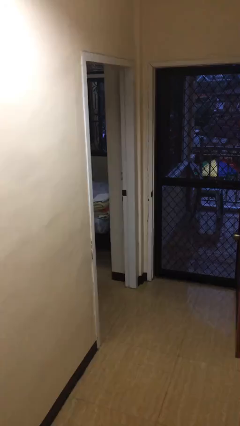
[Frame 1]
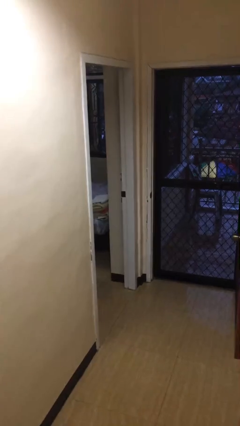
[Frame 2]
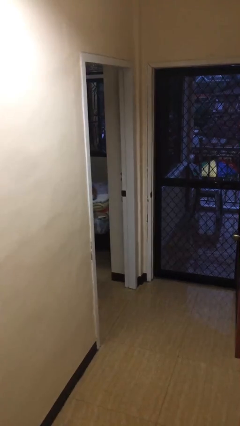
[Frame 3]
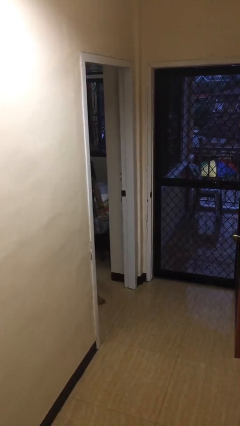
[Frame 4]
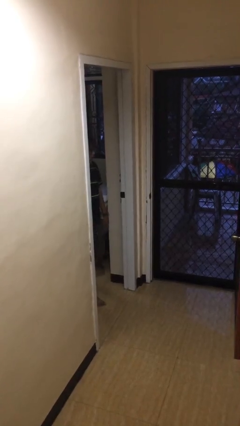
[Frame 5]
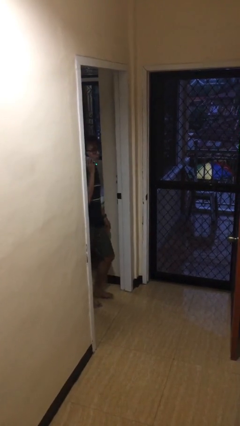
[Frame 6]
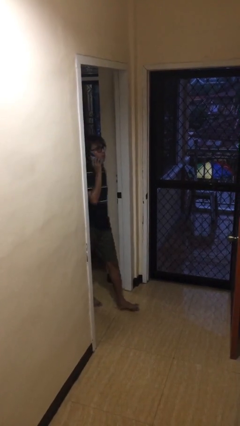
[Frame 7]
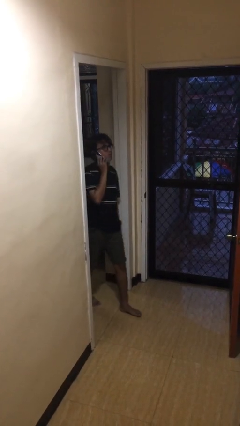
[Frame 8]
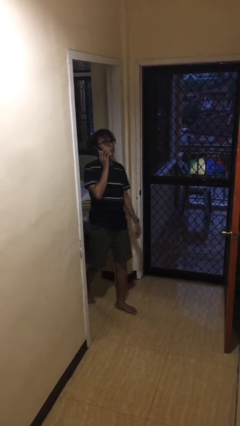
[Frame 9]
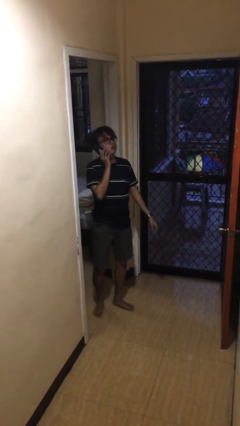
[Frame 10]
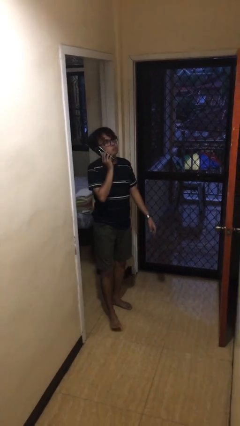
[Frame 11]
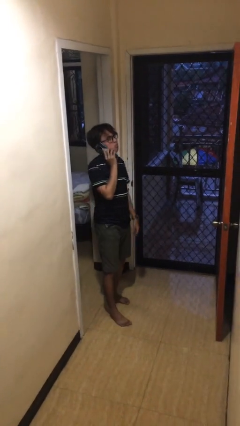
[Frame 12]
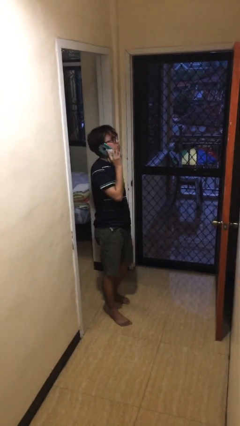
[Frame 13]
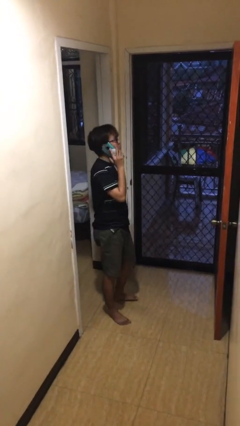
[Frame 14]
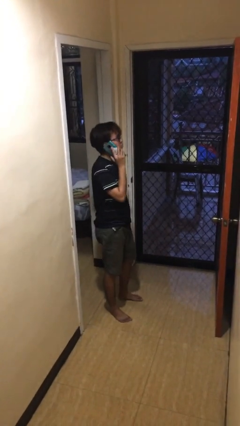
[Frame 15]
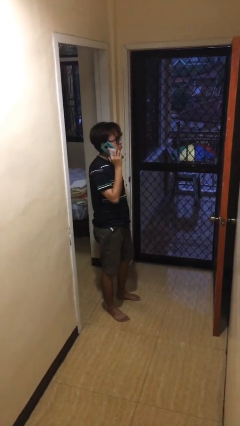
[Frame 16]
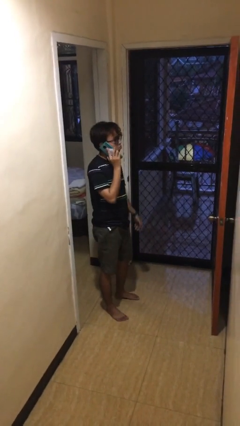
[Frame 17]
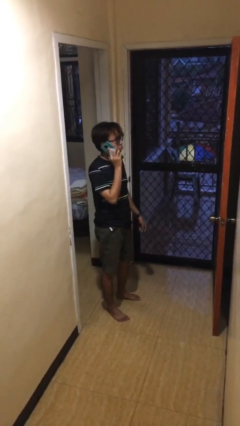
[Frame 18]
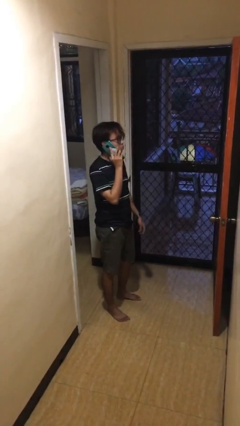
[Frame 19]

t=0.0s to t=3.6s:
person enters scene through structure

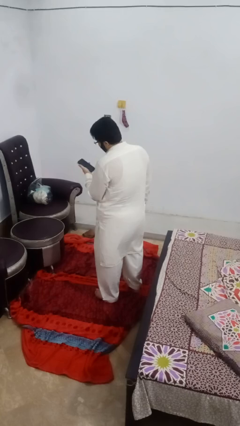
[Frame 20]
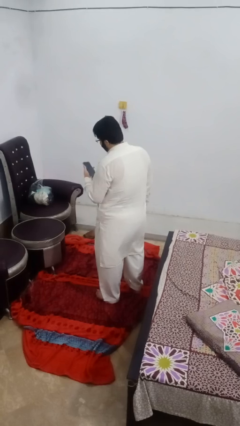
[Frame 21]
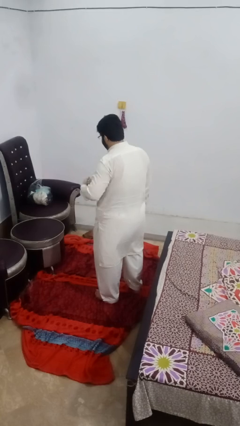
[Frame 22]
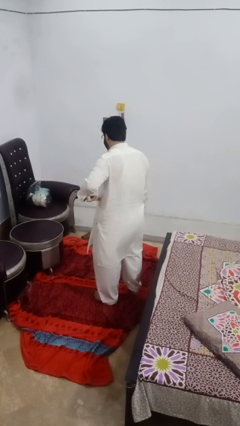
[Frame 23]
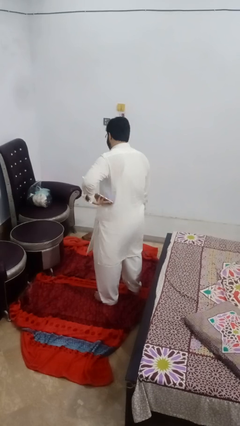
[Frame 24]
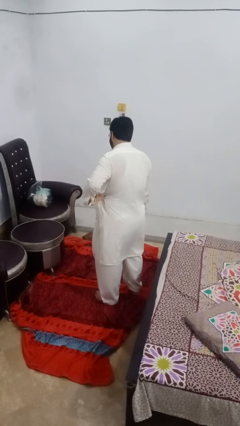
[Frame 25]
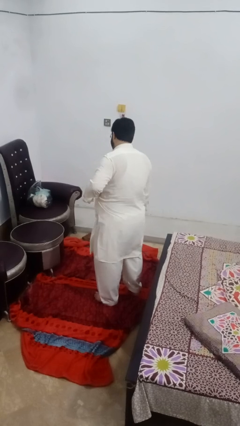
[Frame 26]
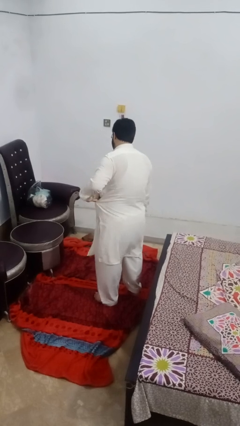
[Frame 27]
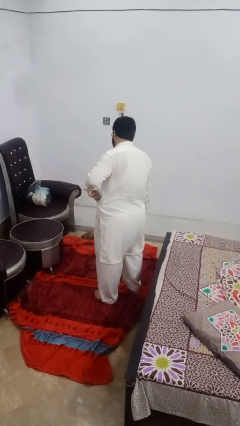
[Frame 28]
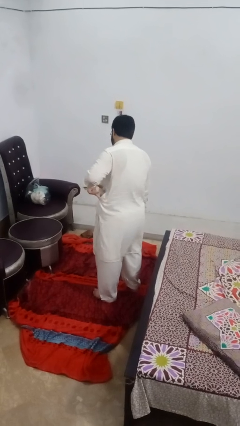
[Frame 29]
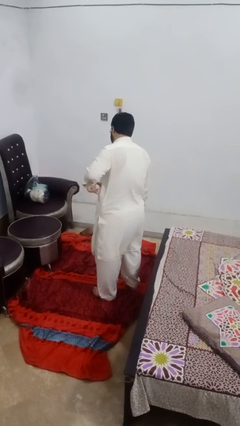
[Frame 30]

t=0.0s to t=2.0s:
person puts phone into pocket

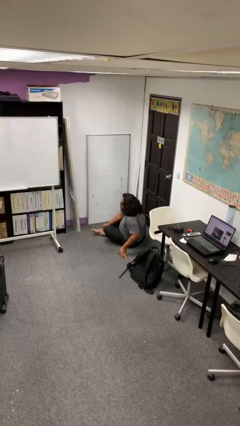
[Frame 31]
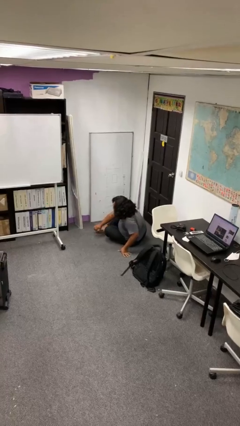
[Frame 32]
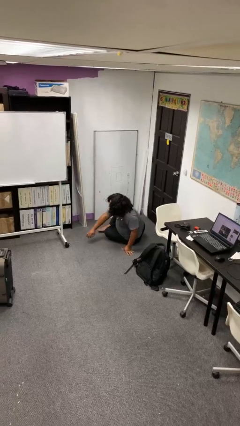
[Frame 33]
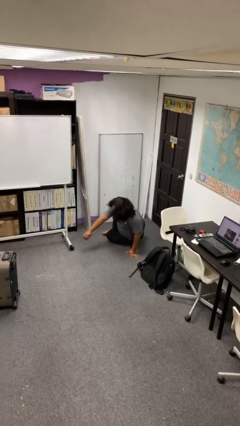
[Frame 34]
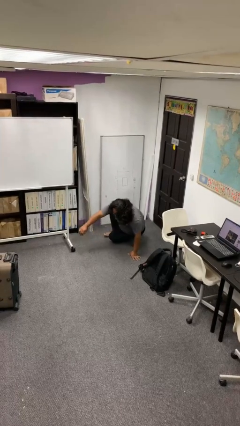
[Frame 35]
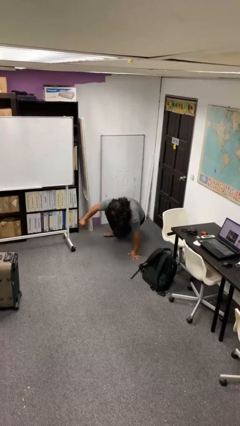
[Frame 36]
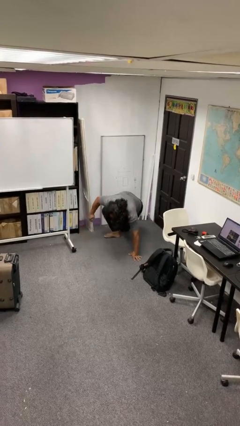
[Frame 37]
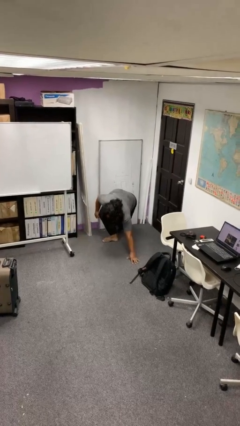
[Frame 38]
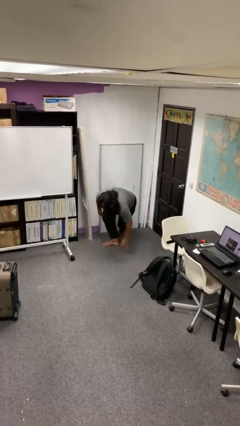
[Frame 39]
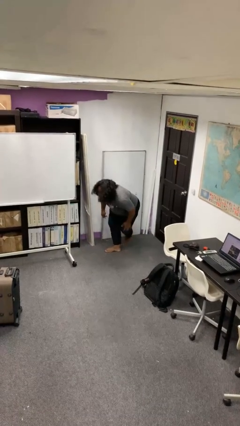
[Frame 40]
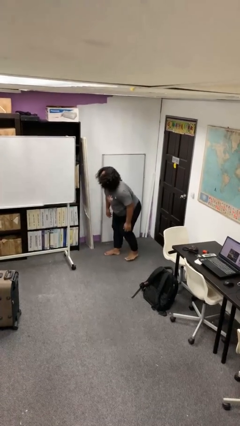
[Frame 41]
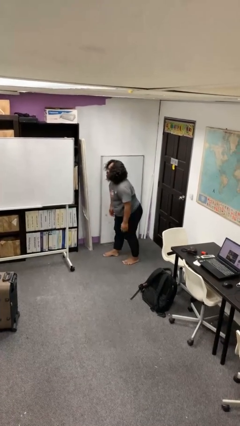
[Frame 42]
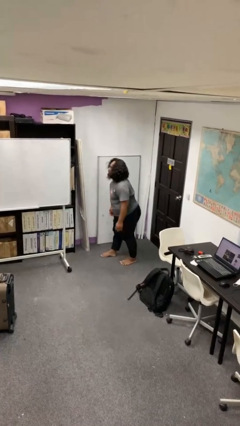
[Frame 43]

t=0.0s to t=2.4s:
person stands up from floor

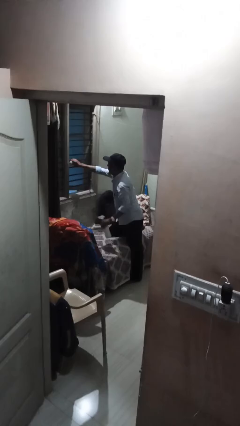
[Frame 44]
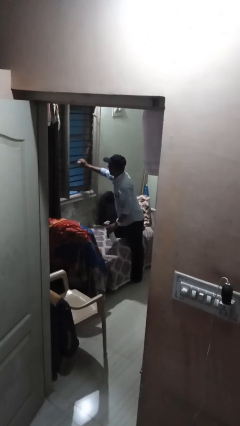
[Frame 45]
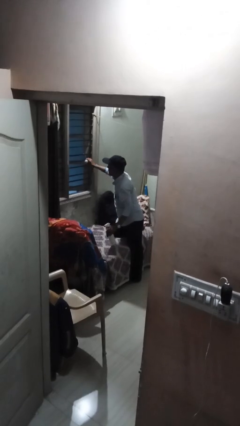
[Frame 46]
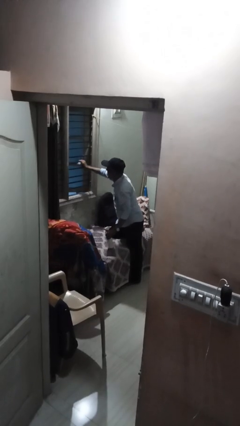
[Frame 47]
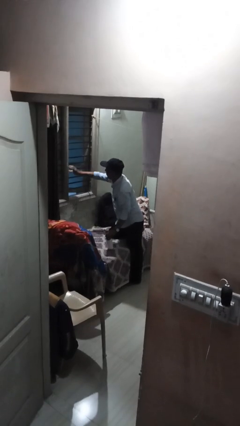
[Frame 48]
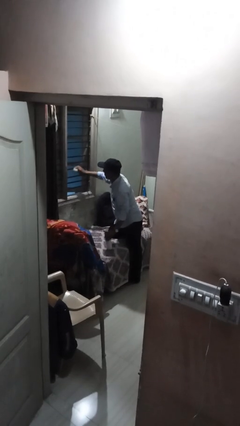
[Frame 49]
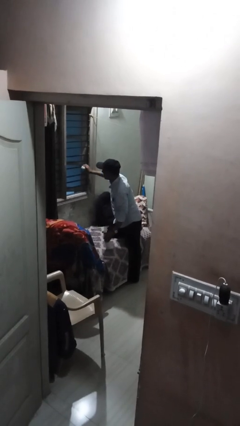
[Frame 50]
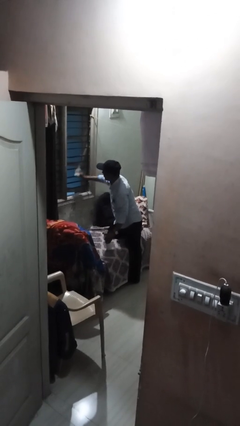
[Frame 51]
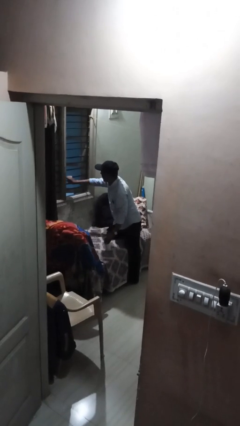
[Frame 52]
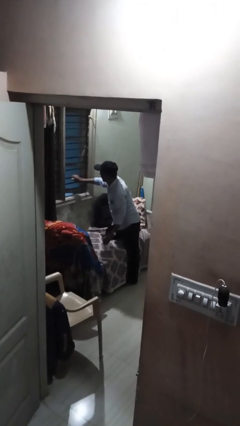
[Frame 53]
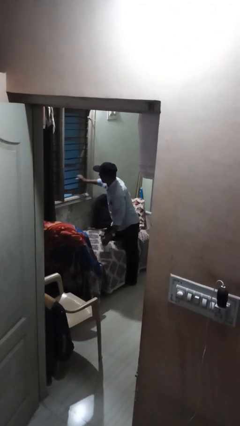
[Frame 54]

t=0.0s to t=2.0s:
person washes window

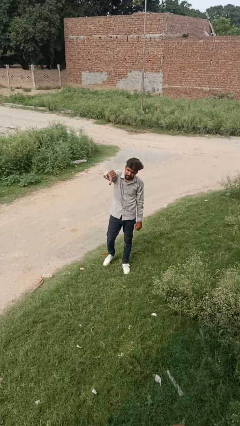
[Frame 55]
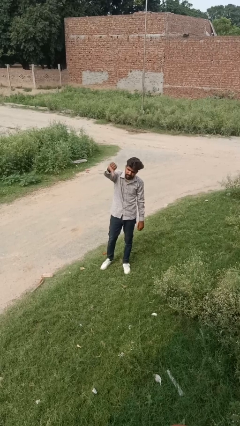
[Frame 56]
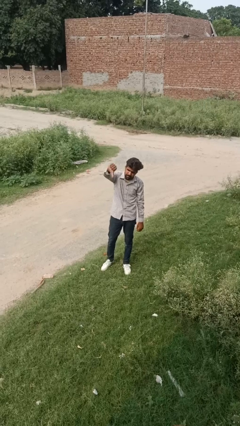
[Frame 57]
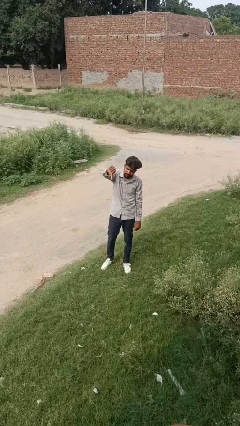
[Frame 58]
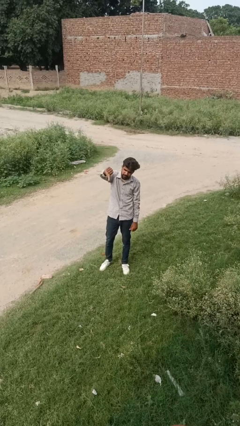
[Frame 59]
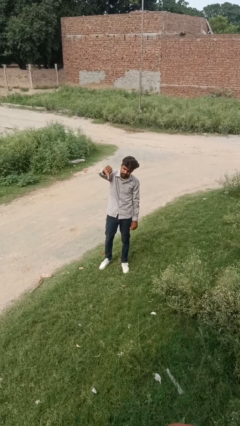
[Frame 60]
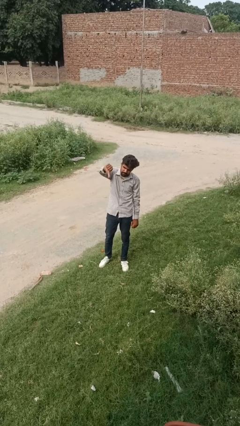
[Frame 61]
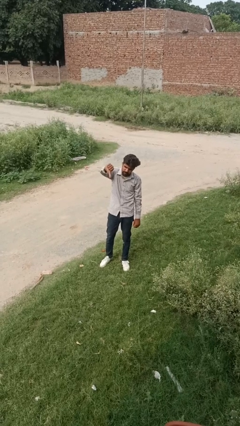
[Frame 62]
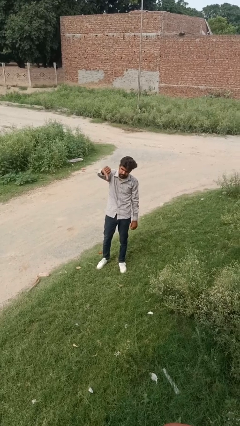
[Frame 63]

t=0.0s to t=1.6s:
person gestures thumbs down

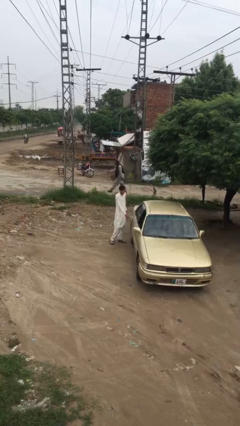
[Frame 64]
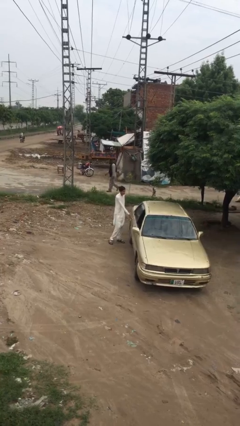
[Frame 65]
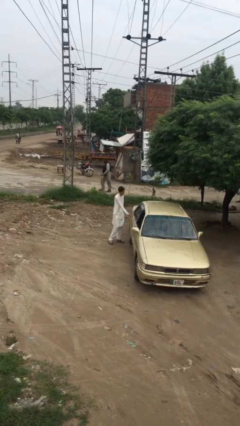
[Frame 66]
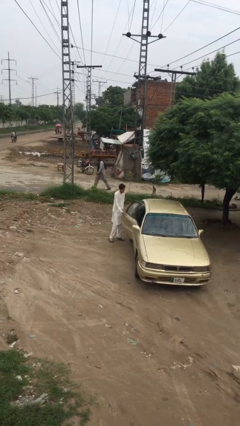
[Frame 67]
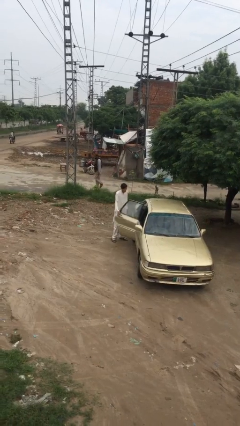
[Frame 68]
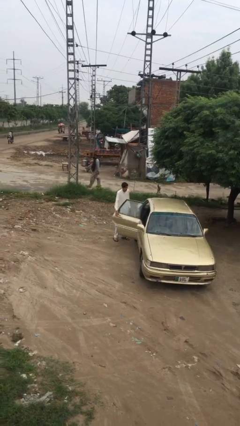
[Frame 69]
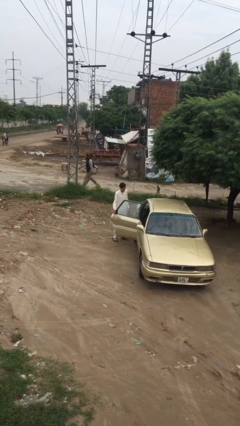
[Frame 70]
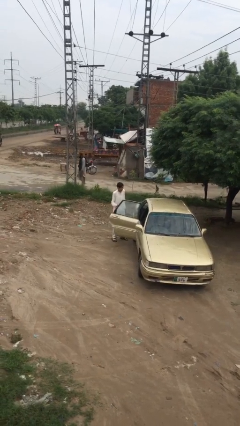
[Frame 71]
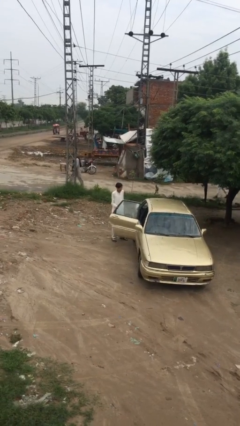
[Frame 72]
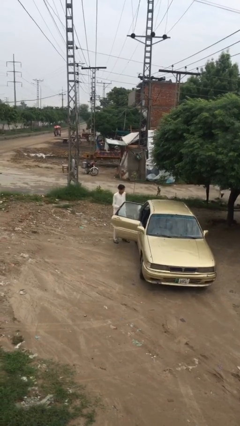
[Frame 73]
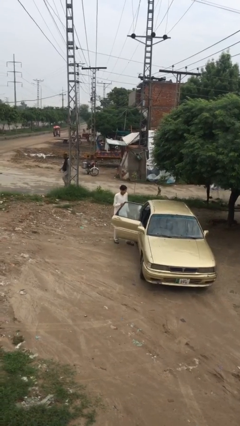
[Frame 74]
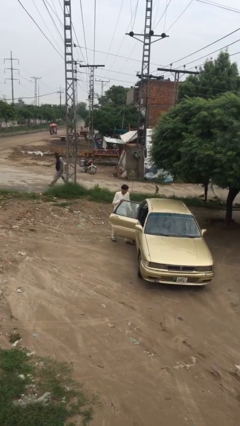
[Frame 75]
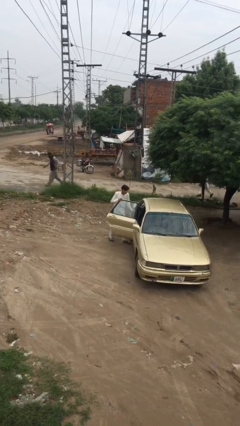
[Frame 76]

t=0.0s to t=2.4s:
person opens car door

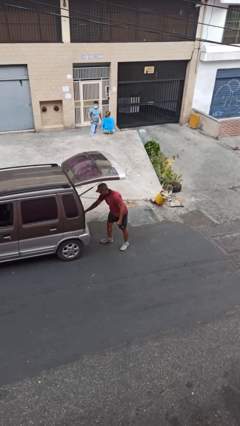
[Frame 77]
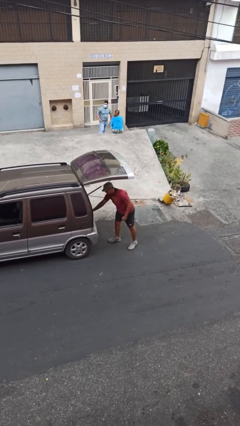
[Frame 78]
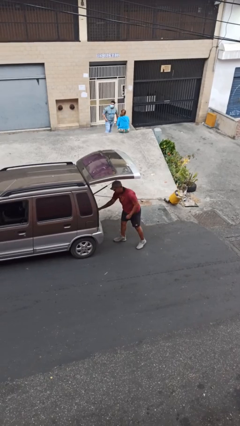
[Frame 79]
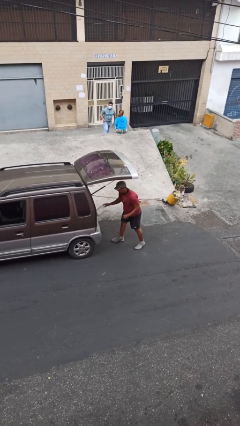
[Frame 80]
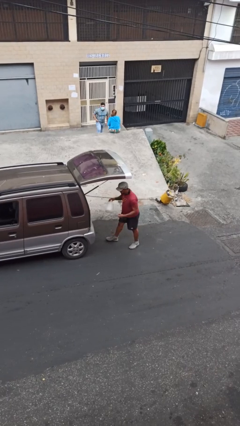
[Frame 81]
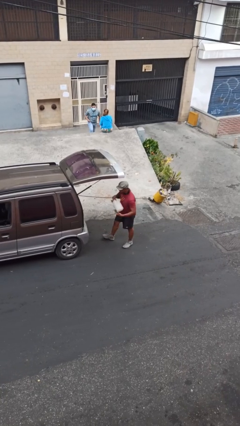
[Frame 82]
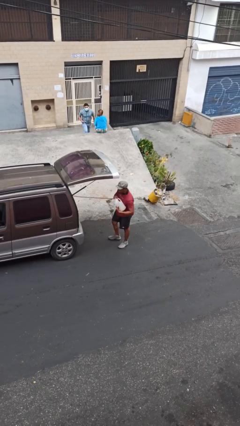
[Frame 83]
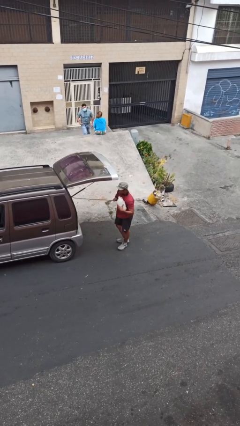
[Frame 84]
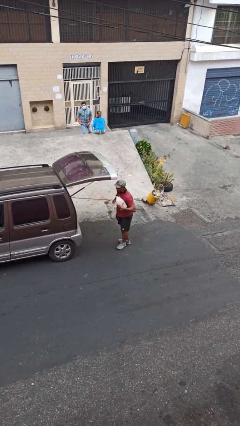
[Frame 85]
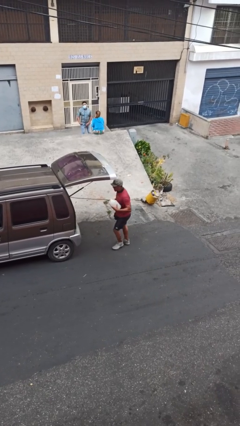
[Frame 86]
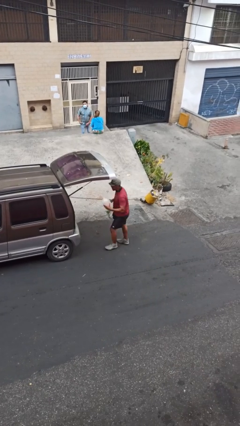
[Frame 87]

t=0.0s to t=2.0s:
person unloads car

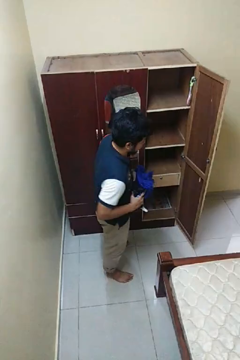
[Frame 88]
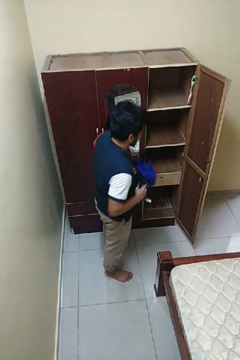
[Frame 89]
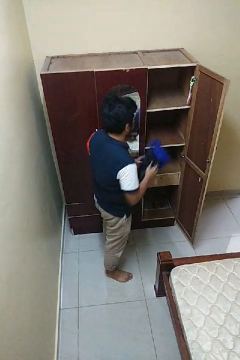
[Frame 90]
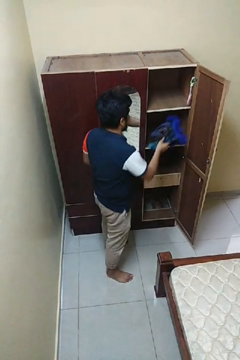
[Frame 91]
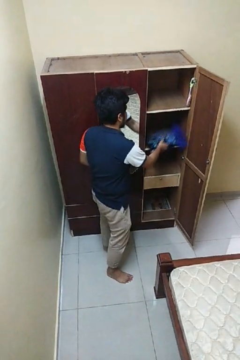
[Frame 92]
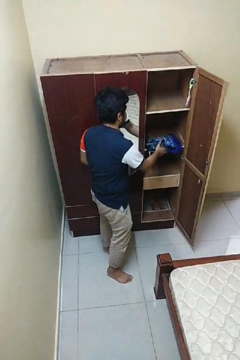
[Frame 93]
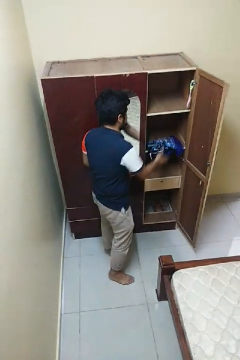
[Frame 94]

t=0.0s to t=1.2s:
person puts down object into cabinet
